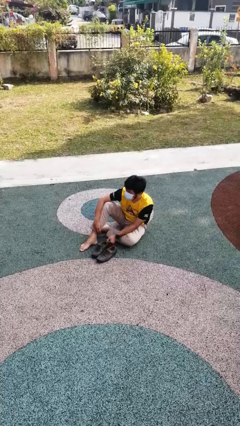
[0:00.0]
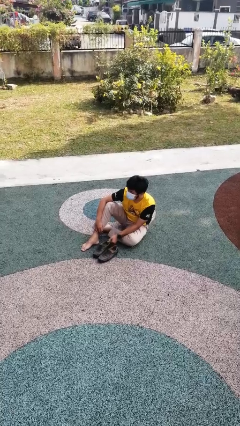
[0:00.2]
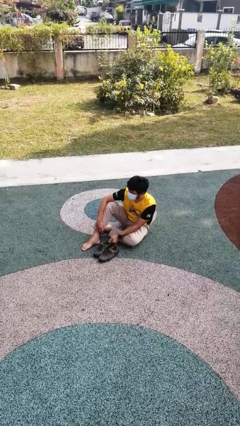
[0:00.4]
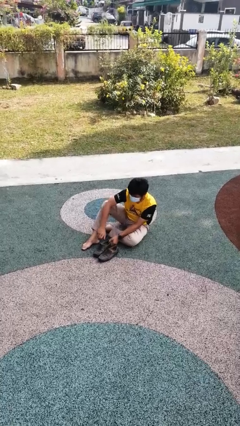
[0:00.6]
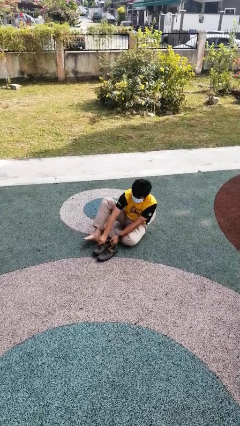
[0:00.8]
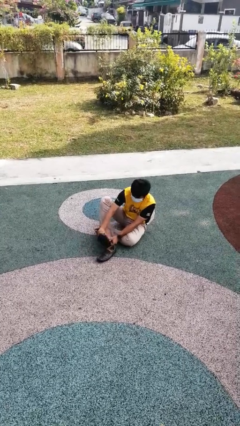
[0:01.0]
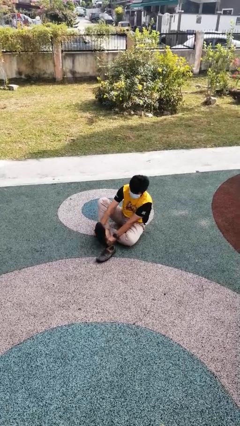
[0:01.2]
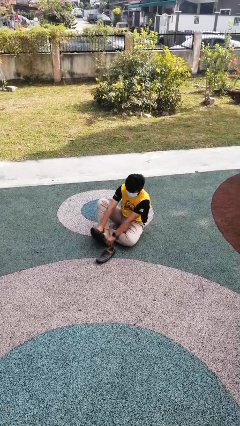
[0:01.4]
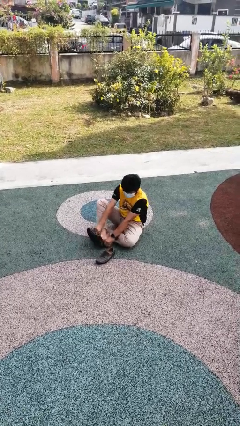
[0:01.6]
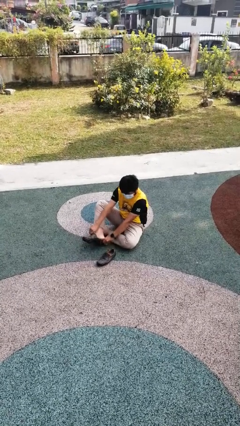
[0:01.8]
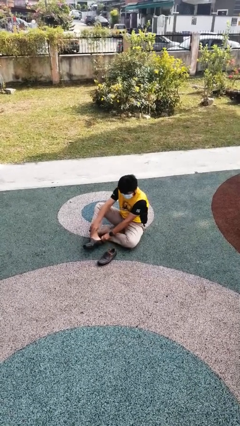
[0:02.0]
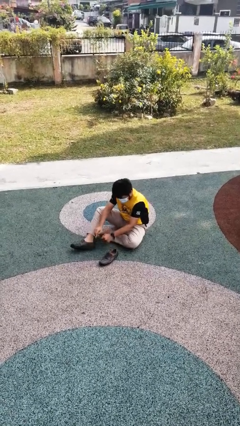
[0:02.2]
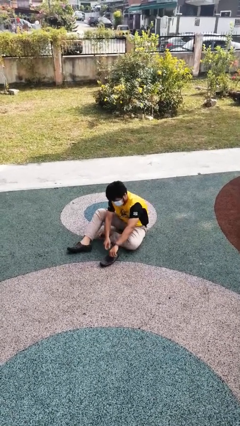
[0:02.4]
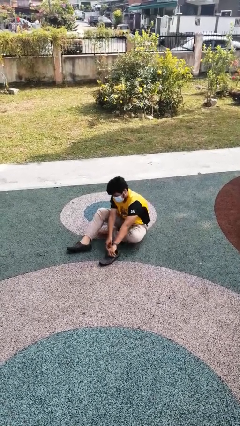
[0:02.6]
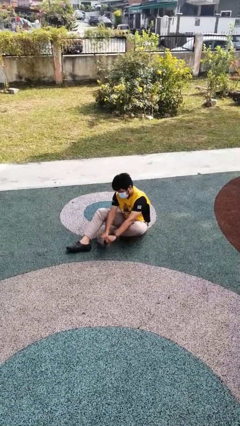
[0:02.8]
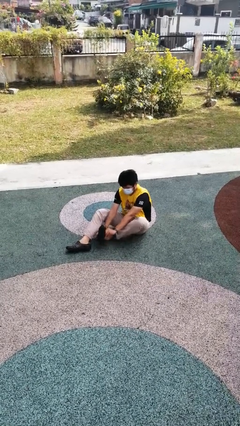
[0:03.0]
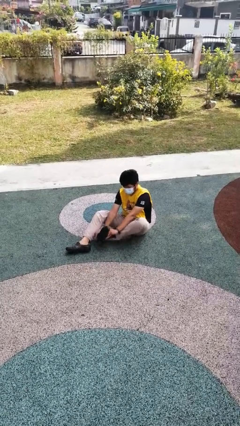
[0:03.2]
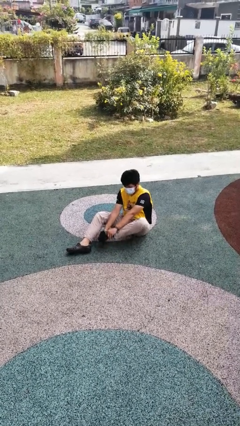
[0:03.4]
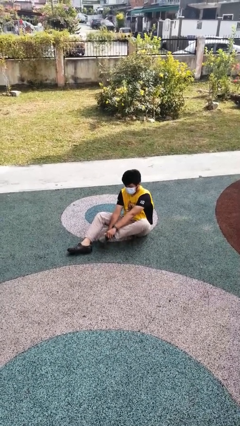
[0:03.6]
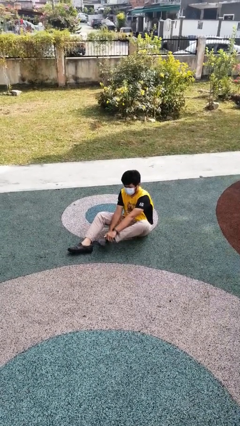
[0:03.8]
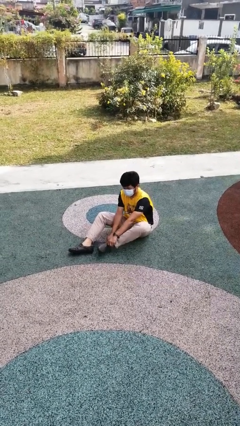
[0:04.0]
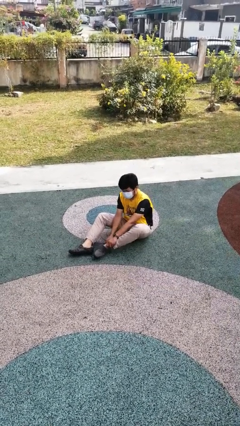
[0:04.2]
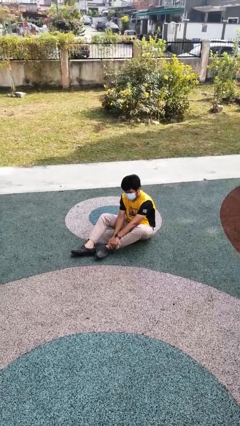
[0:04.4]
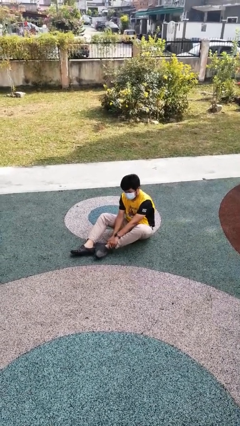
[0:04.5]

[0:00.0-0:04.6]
person puts on shoes

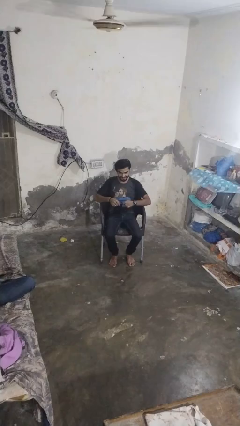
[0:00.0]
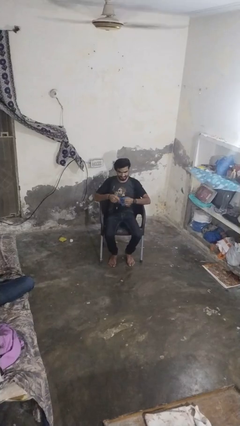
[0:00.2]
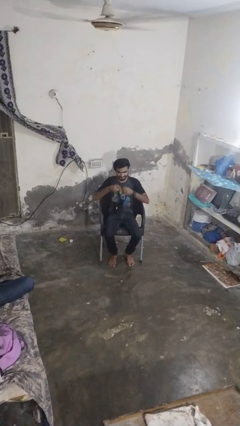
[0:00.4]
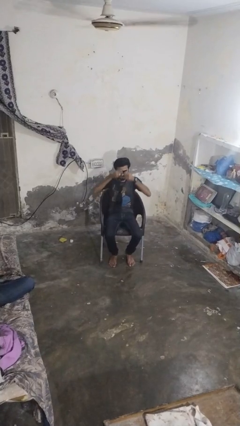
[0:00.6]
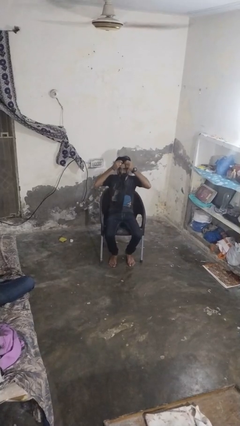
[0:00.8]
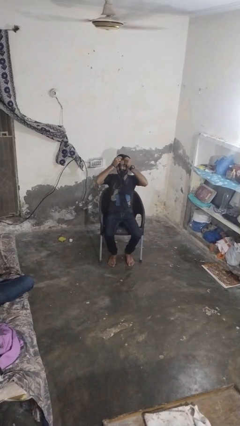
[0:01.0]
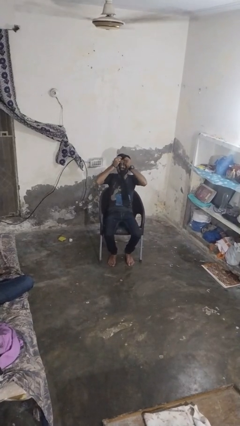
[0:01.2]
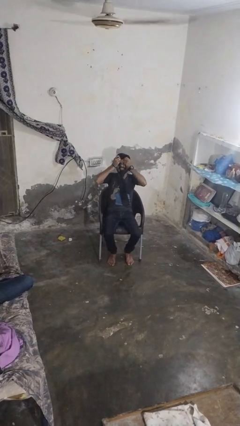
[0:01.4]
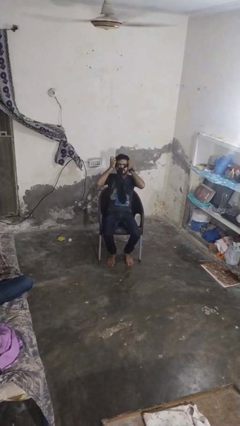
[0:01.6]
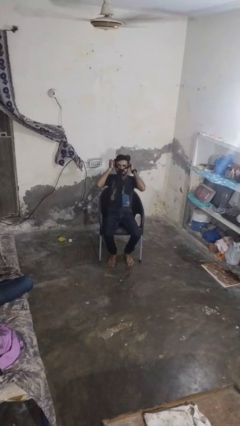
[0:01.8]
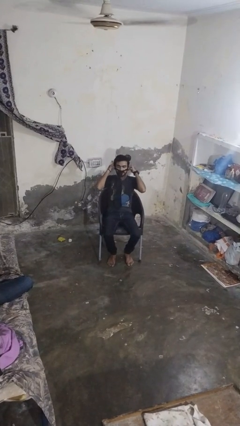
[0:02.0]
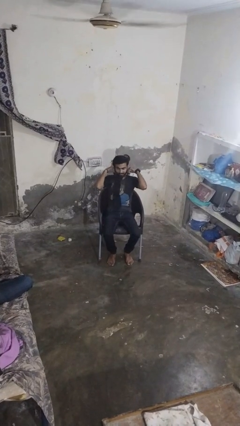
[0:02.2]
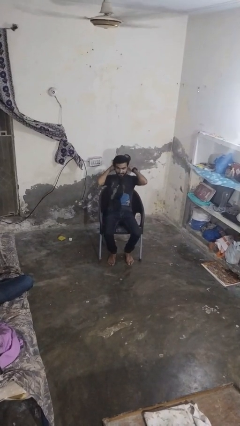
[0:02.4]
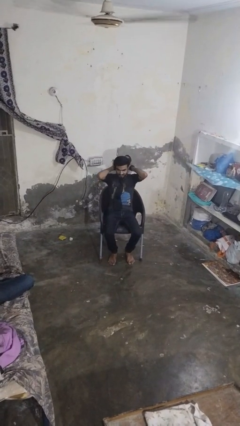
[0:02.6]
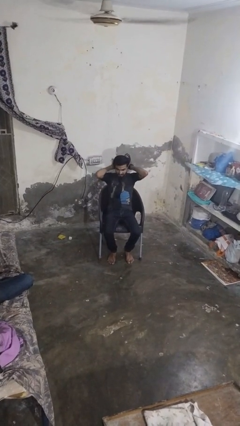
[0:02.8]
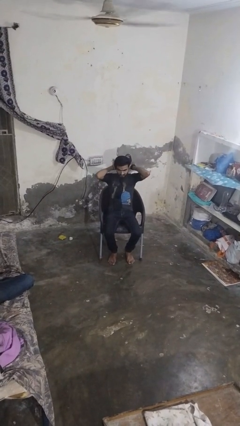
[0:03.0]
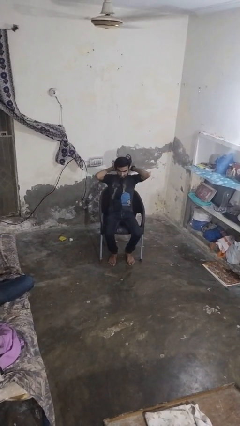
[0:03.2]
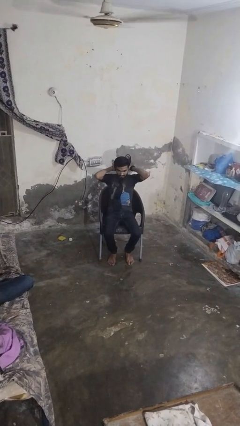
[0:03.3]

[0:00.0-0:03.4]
person puts on necktie

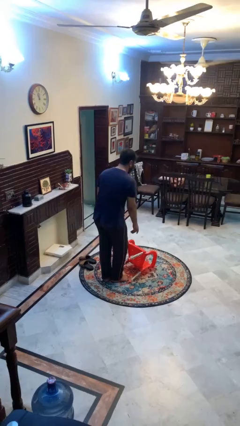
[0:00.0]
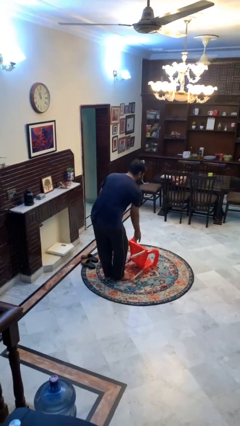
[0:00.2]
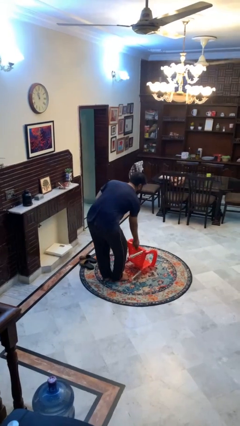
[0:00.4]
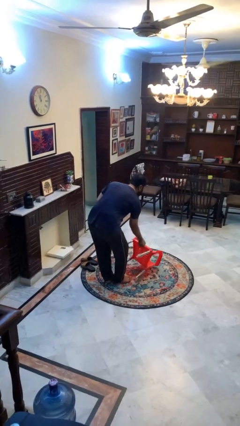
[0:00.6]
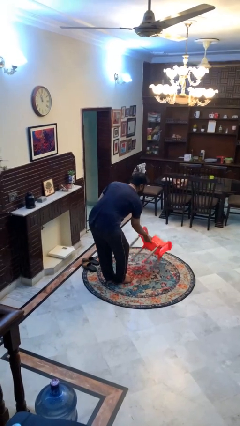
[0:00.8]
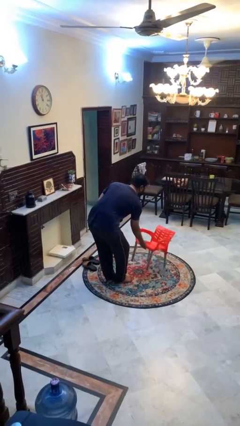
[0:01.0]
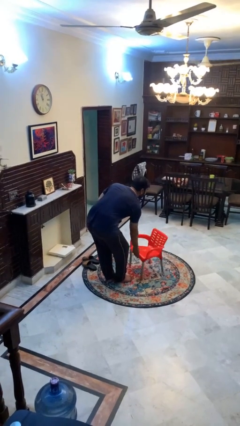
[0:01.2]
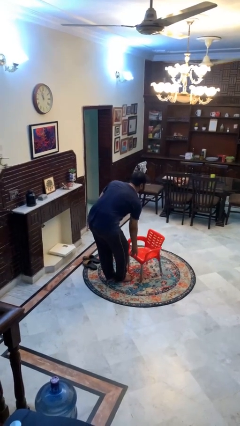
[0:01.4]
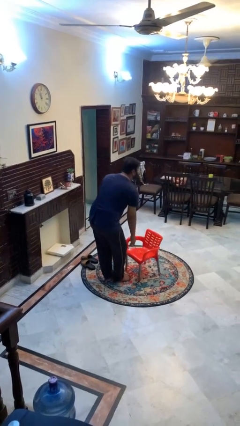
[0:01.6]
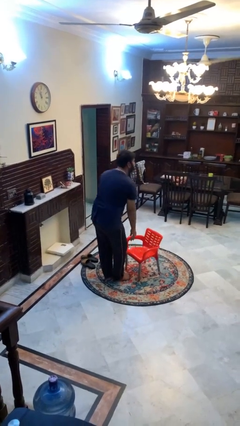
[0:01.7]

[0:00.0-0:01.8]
person sets upright furniture

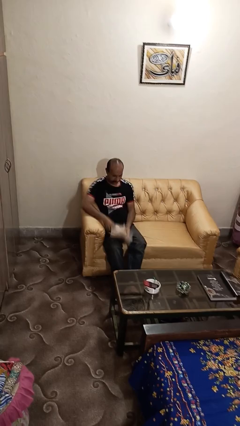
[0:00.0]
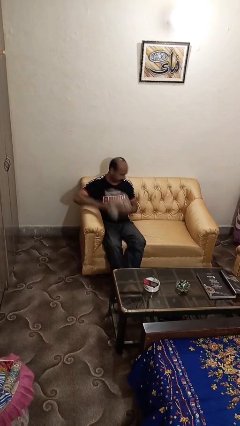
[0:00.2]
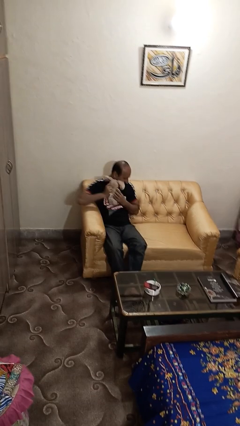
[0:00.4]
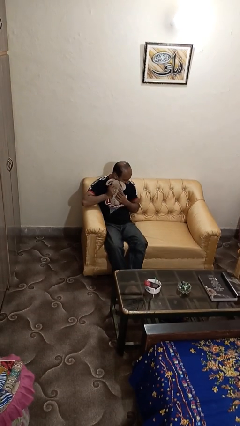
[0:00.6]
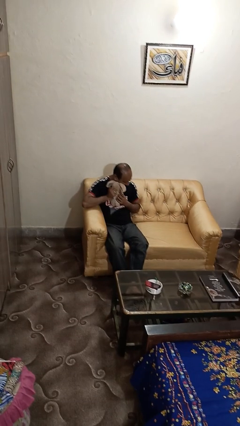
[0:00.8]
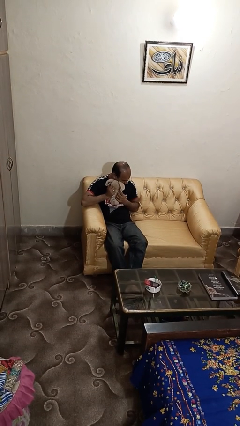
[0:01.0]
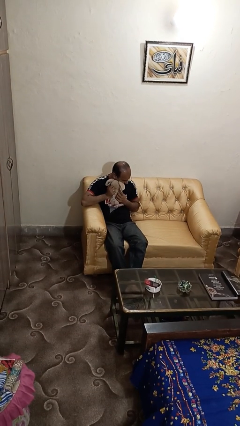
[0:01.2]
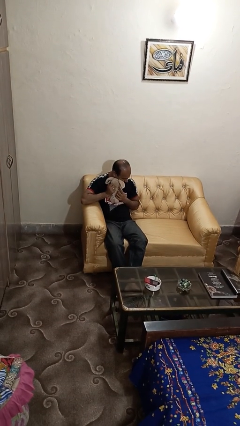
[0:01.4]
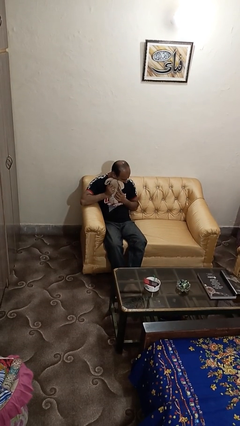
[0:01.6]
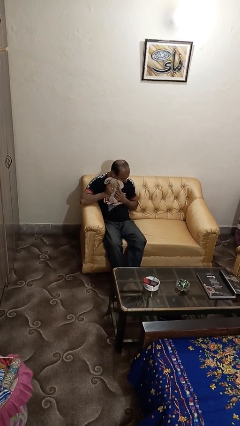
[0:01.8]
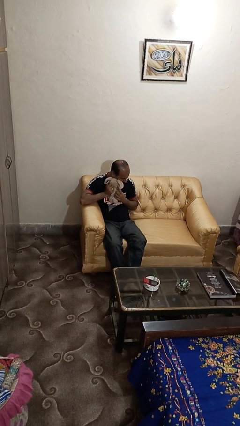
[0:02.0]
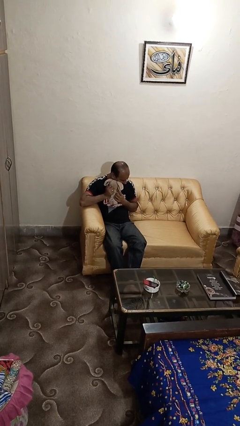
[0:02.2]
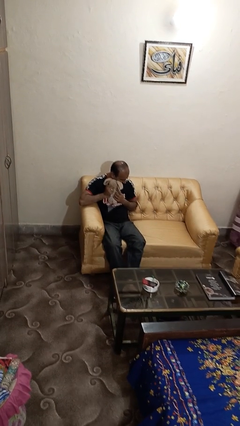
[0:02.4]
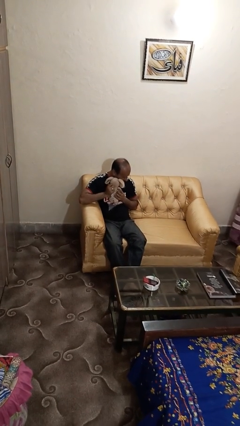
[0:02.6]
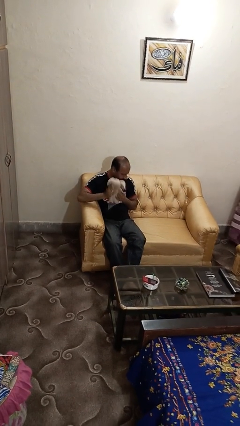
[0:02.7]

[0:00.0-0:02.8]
person hugs stuffed animal

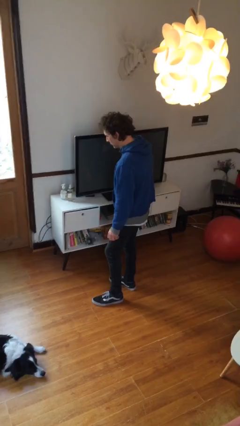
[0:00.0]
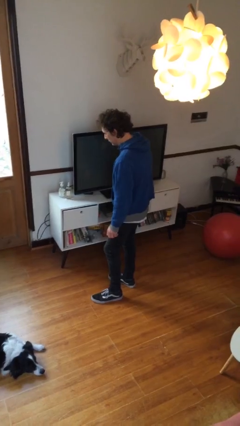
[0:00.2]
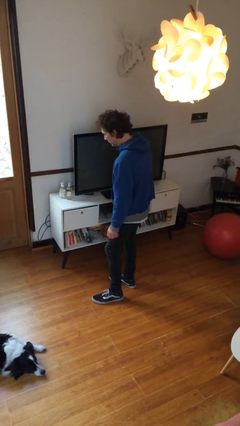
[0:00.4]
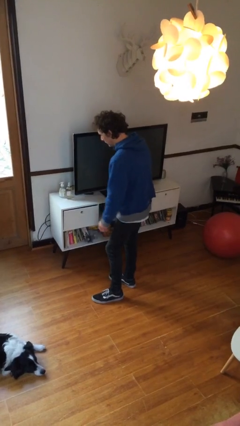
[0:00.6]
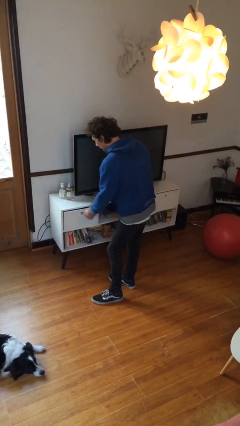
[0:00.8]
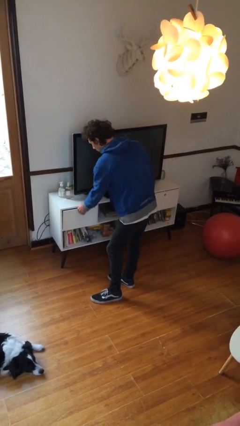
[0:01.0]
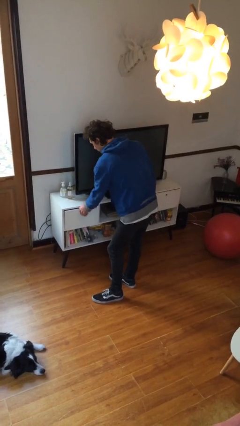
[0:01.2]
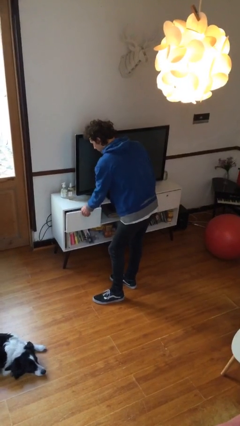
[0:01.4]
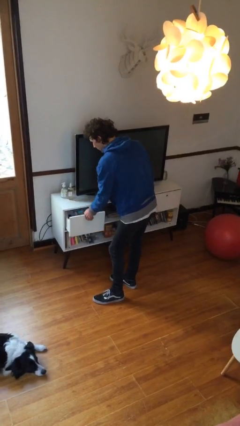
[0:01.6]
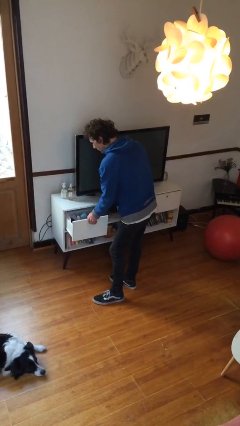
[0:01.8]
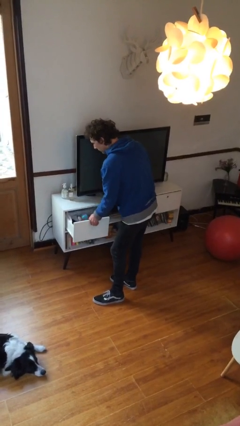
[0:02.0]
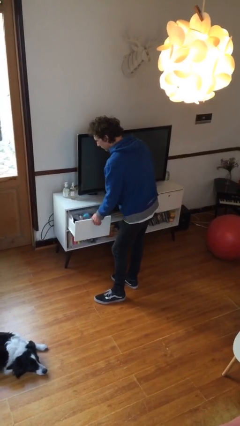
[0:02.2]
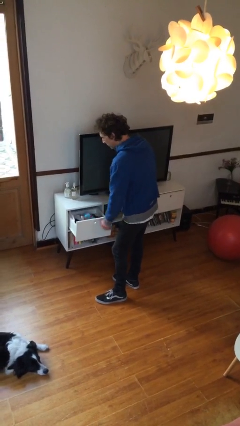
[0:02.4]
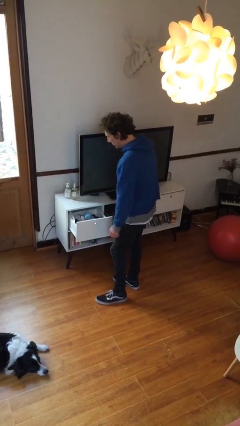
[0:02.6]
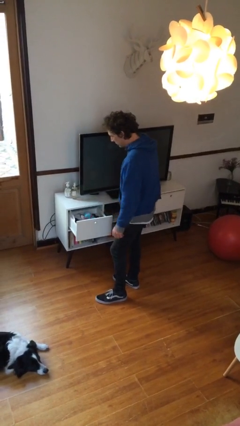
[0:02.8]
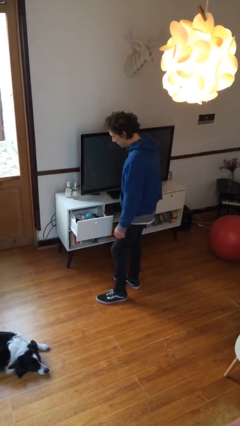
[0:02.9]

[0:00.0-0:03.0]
person opens dresser drawer

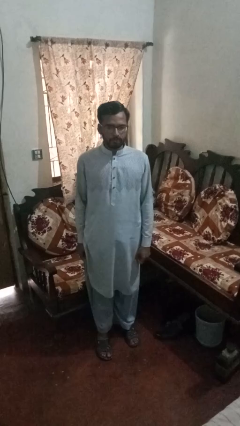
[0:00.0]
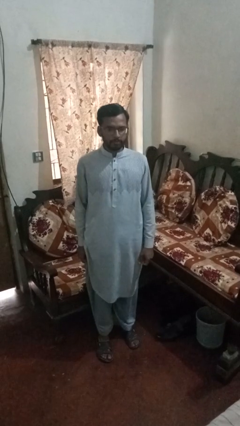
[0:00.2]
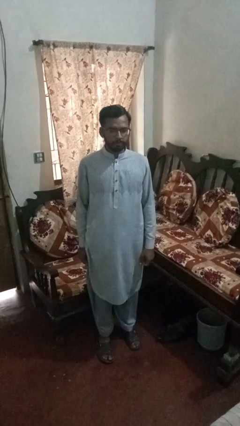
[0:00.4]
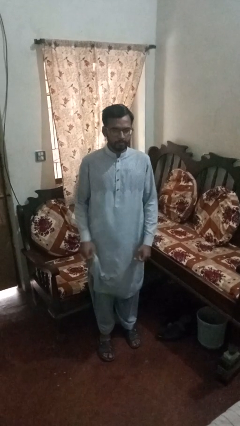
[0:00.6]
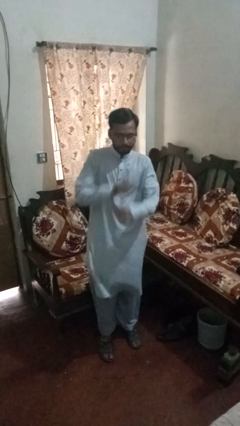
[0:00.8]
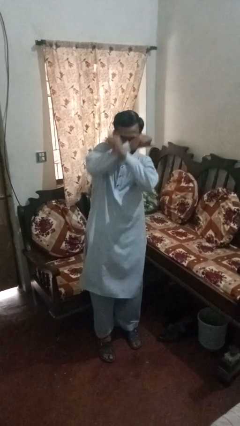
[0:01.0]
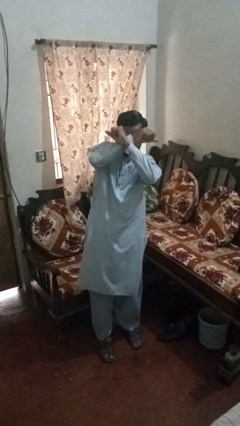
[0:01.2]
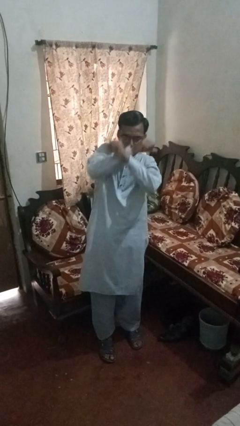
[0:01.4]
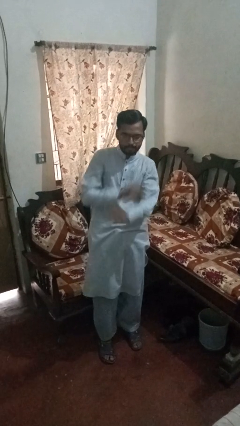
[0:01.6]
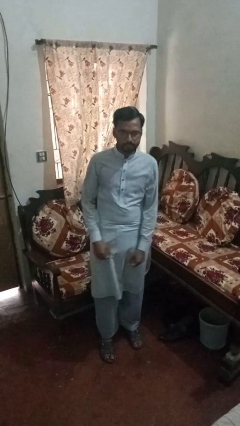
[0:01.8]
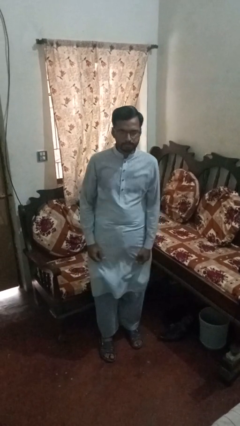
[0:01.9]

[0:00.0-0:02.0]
person karate chop
